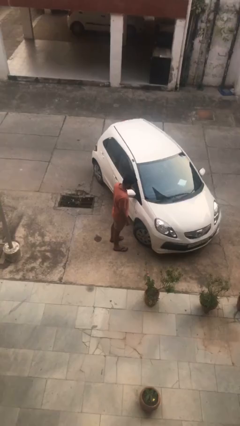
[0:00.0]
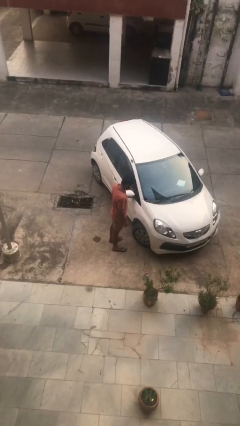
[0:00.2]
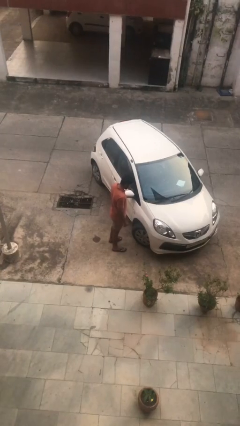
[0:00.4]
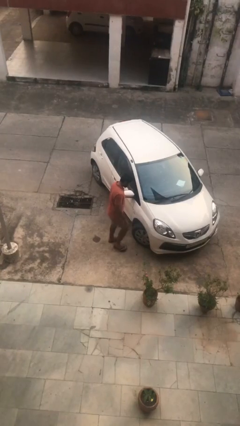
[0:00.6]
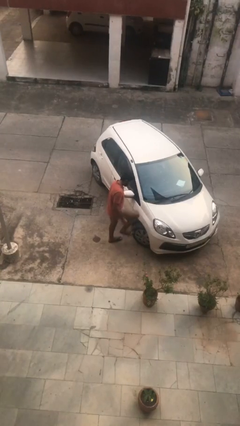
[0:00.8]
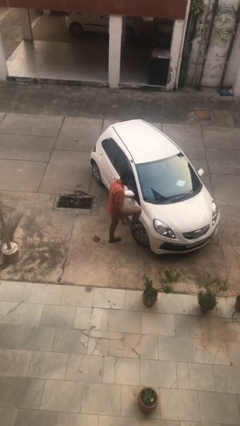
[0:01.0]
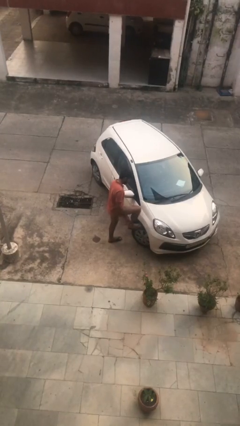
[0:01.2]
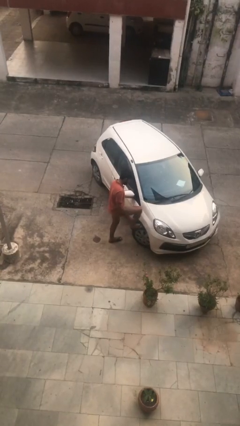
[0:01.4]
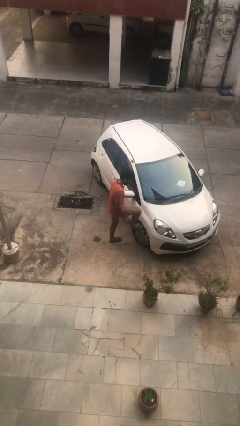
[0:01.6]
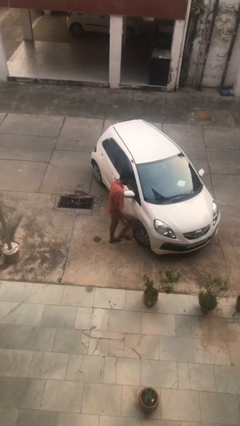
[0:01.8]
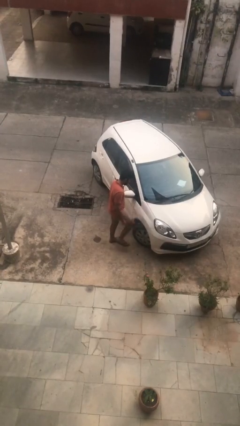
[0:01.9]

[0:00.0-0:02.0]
person kicks car tires

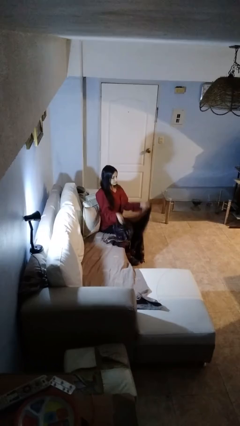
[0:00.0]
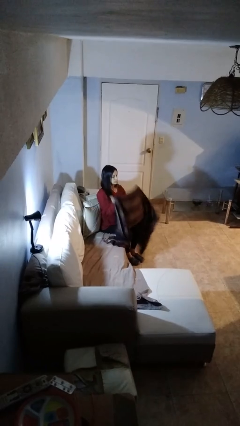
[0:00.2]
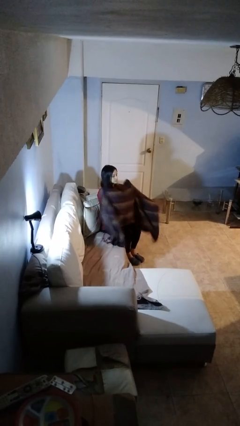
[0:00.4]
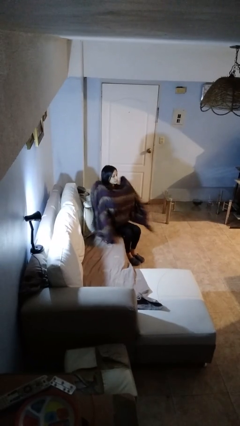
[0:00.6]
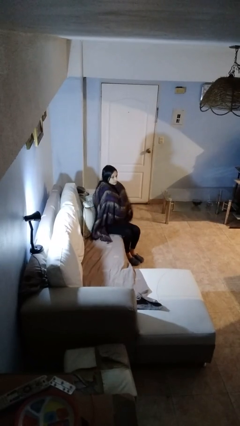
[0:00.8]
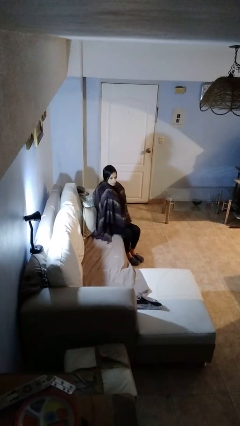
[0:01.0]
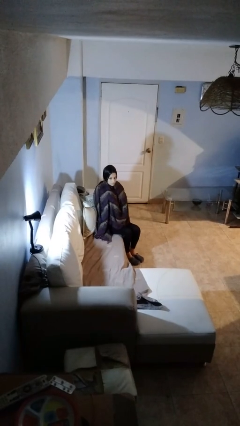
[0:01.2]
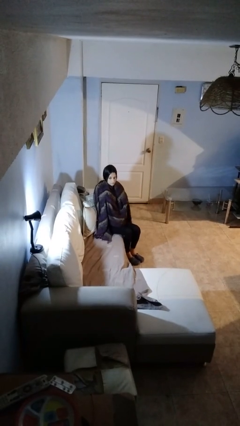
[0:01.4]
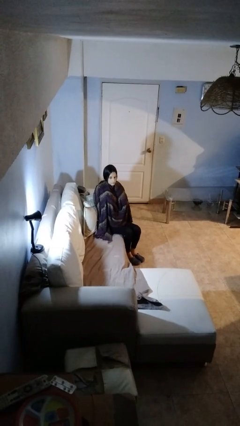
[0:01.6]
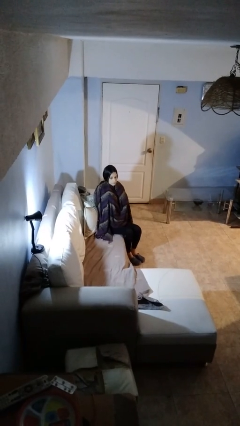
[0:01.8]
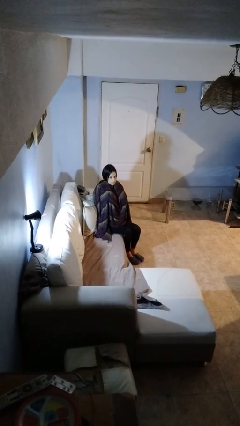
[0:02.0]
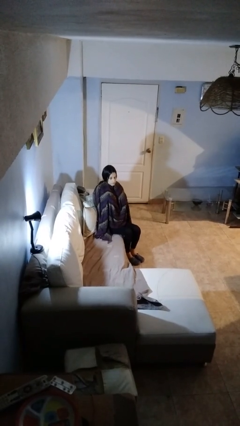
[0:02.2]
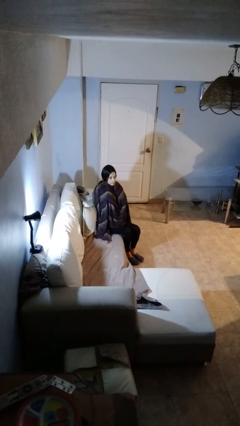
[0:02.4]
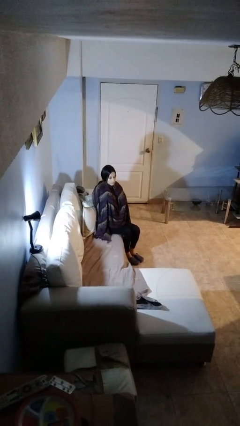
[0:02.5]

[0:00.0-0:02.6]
person covers with blanket

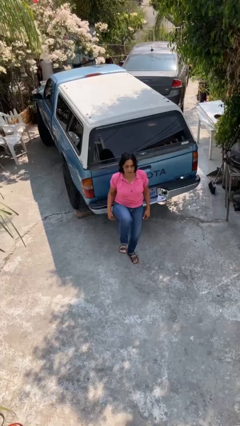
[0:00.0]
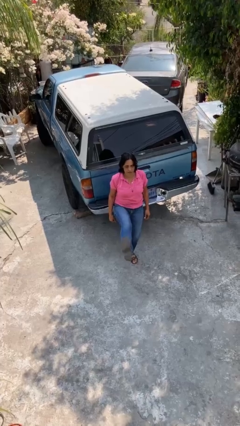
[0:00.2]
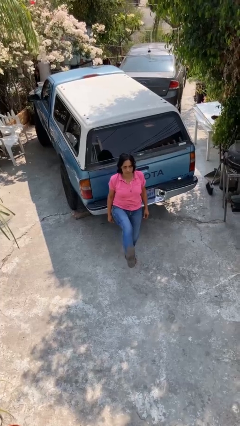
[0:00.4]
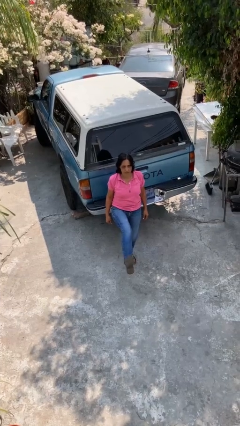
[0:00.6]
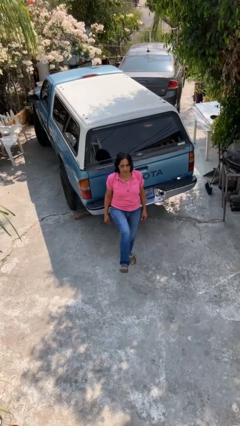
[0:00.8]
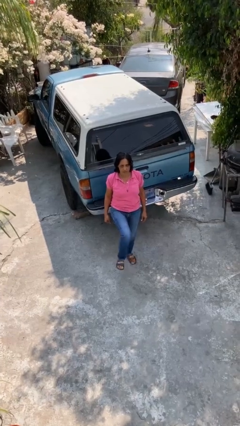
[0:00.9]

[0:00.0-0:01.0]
person karate kicks

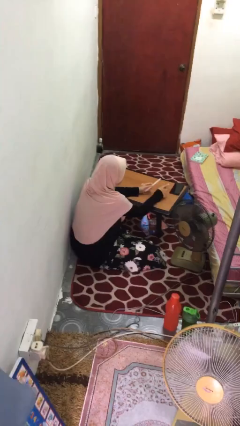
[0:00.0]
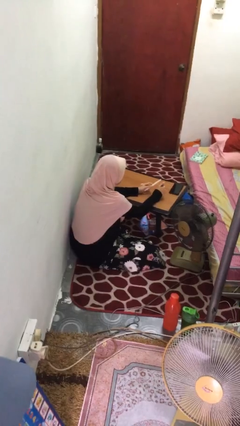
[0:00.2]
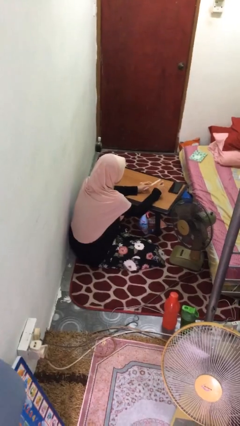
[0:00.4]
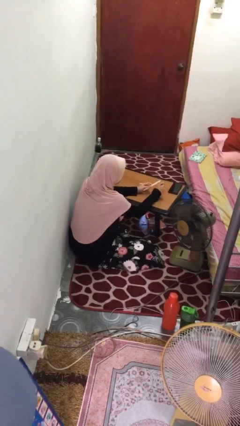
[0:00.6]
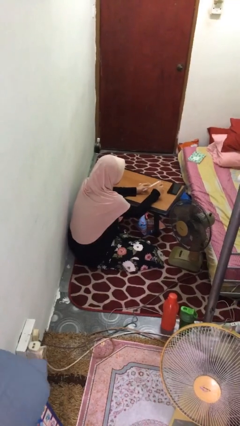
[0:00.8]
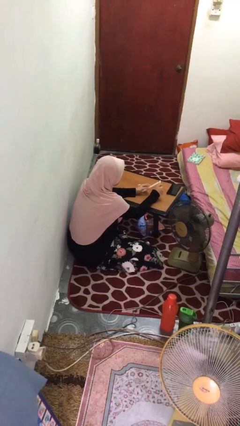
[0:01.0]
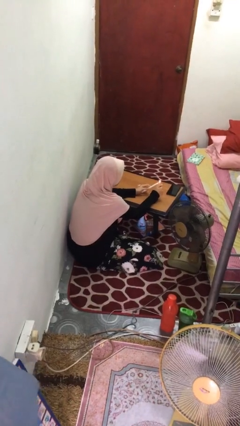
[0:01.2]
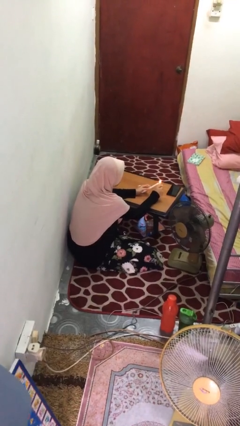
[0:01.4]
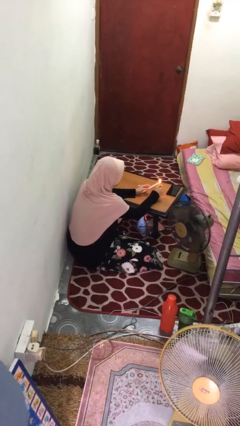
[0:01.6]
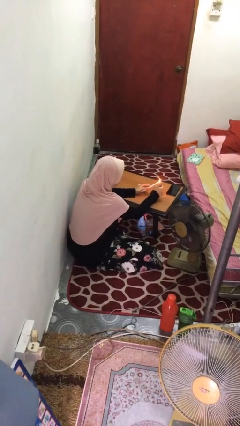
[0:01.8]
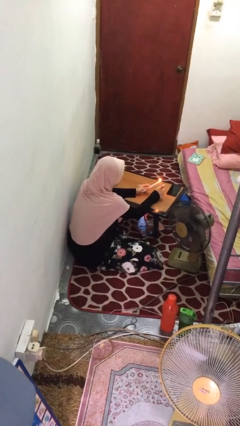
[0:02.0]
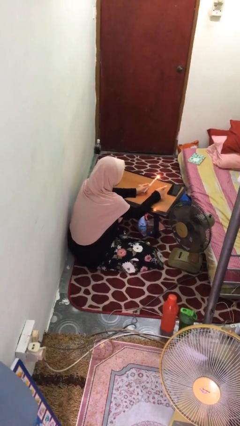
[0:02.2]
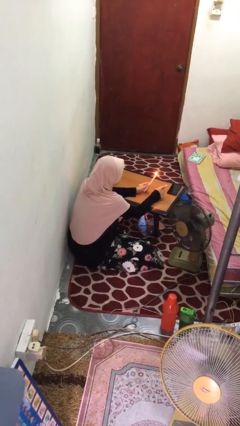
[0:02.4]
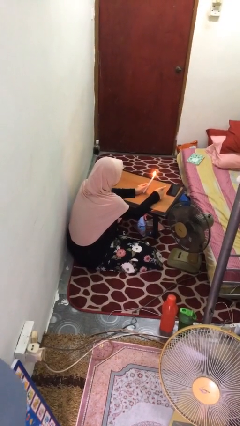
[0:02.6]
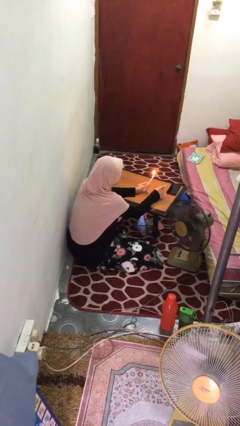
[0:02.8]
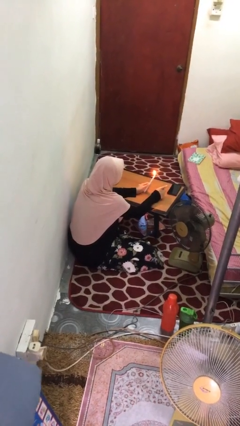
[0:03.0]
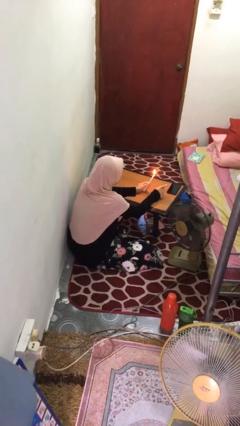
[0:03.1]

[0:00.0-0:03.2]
person lights candle

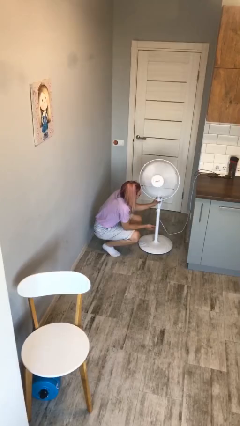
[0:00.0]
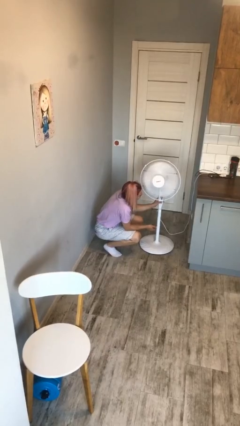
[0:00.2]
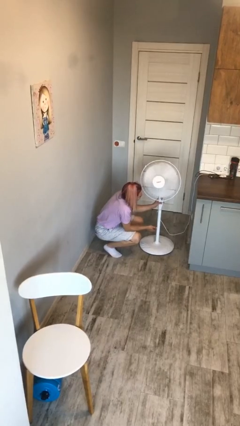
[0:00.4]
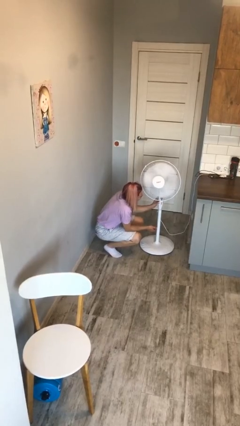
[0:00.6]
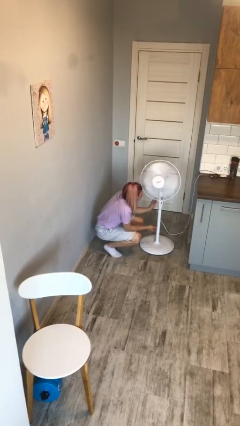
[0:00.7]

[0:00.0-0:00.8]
person turns off fan

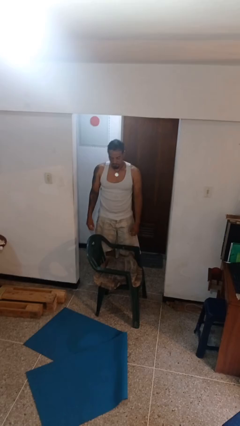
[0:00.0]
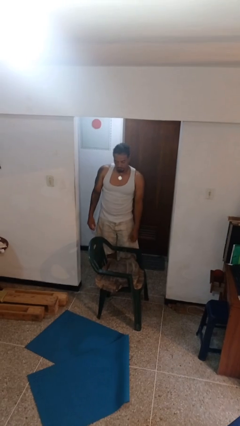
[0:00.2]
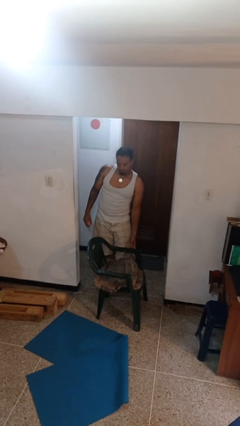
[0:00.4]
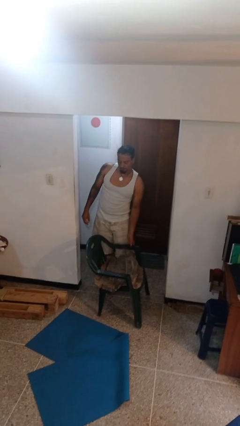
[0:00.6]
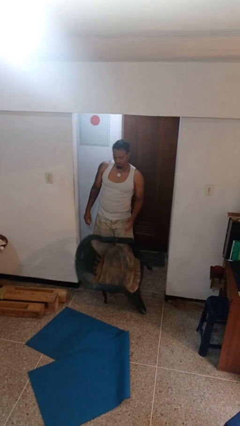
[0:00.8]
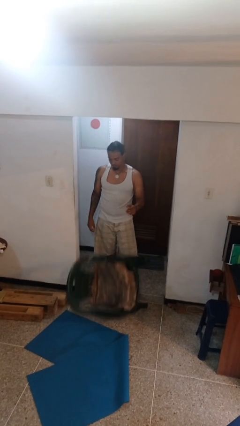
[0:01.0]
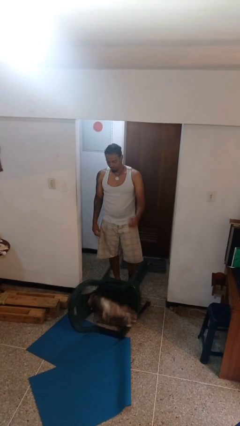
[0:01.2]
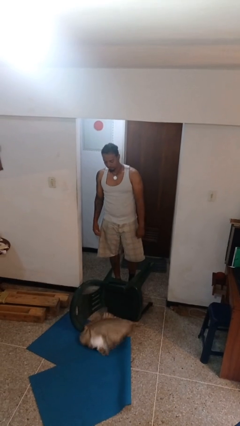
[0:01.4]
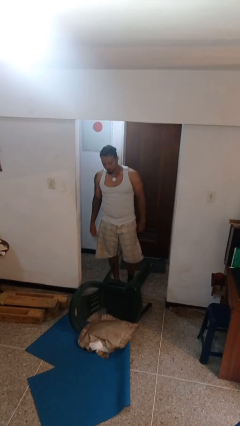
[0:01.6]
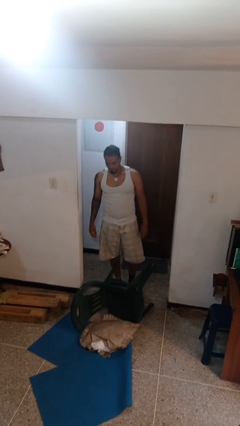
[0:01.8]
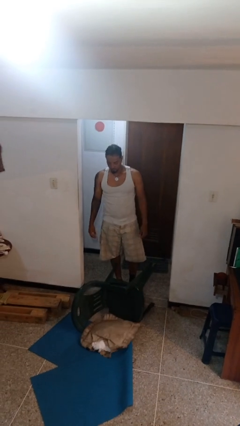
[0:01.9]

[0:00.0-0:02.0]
person knocks over furniture

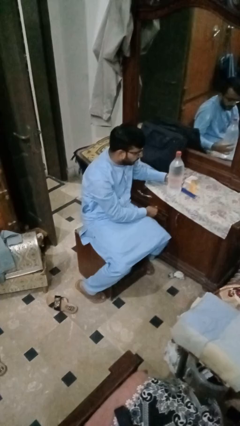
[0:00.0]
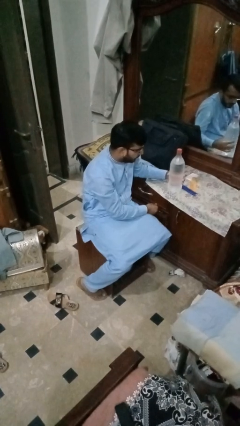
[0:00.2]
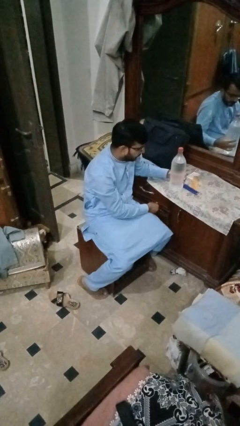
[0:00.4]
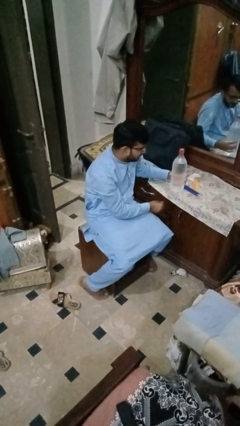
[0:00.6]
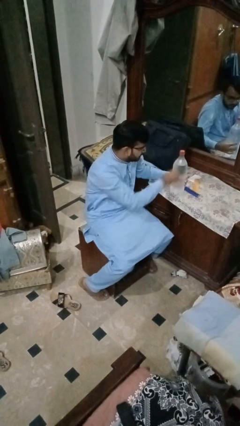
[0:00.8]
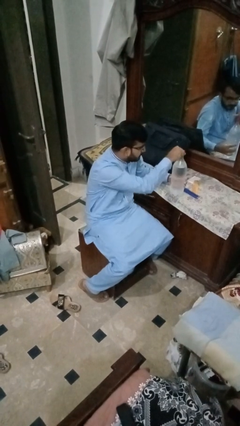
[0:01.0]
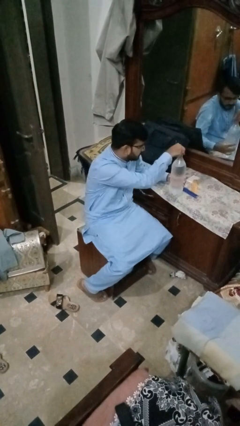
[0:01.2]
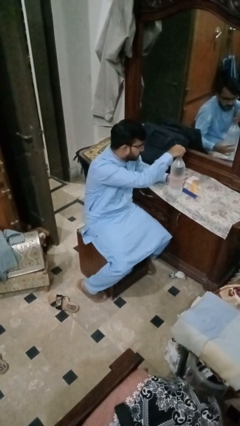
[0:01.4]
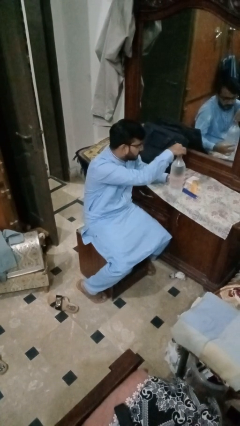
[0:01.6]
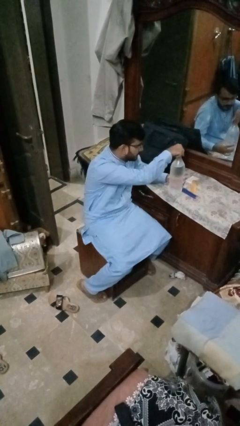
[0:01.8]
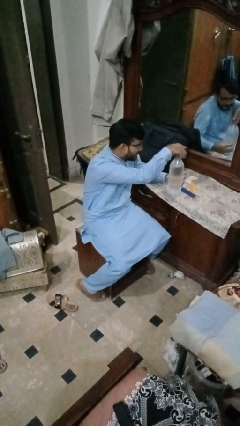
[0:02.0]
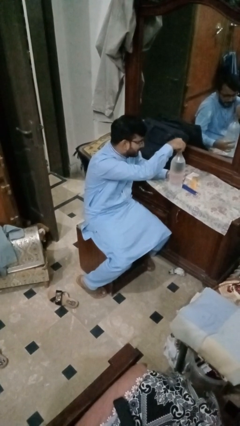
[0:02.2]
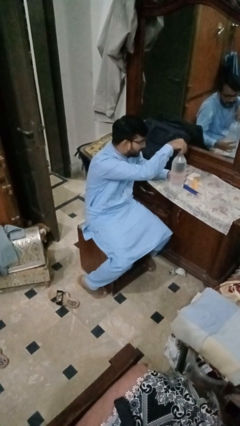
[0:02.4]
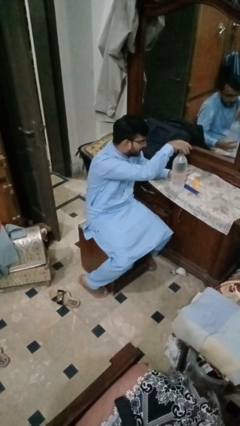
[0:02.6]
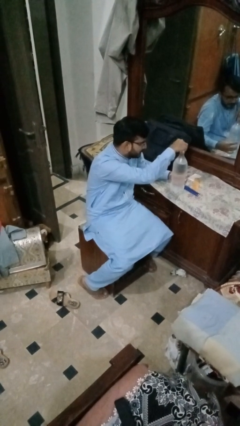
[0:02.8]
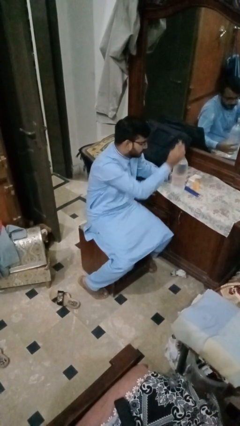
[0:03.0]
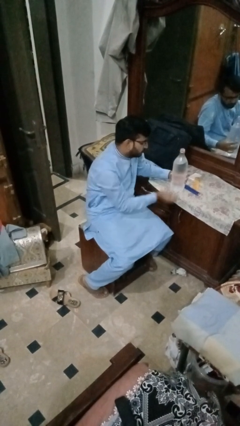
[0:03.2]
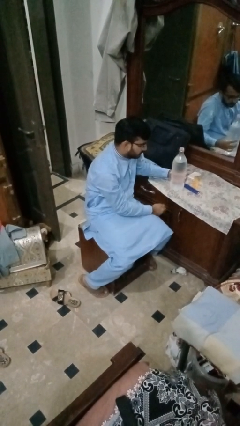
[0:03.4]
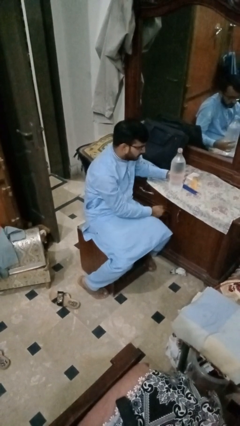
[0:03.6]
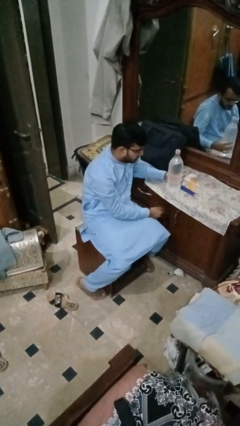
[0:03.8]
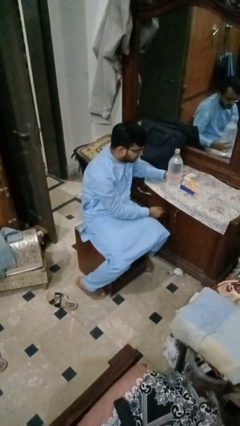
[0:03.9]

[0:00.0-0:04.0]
person unscrews lid from bottle

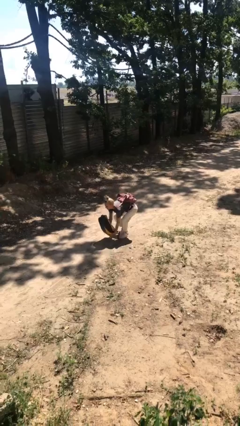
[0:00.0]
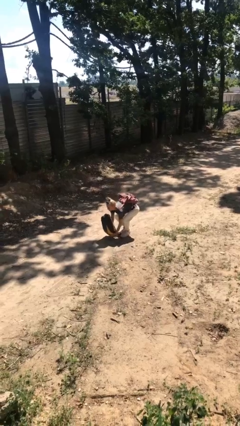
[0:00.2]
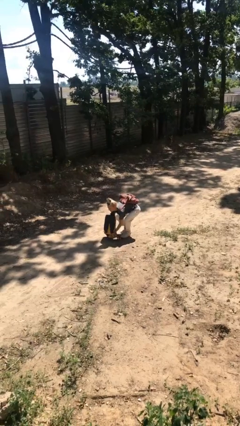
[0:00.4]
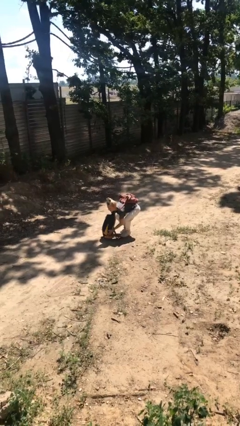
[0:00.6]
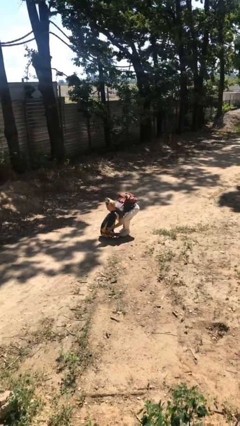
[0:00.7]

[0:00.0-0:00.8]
person puts down object on floor

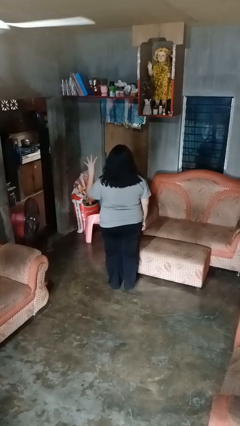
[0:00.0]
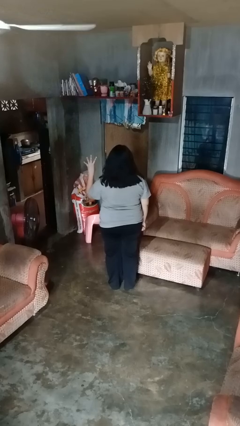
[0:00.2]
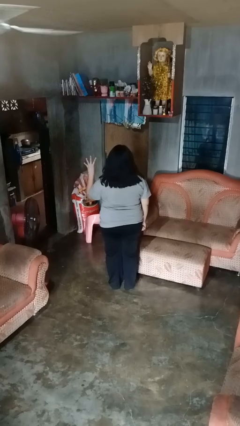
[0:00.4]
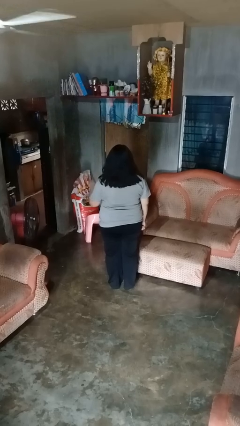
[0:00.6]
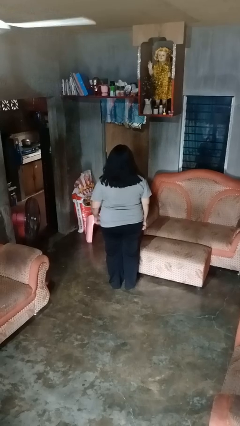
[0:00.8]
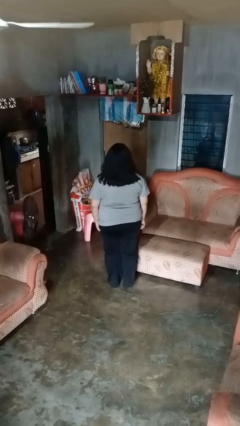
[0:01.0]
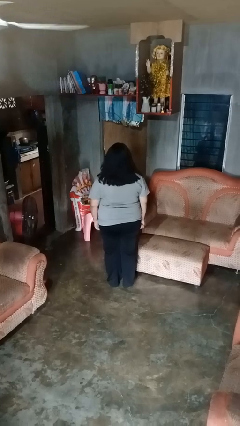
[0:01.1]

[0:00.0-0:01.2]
person gestures number four
